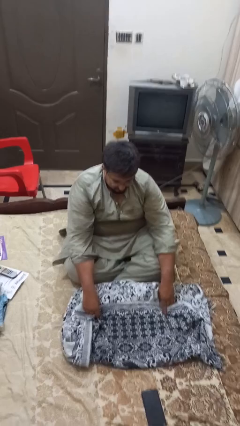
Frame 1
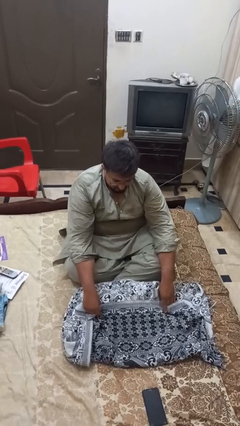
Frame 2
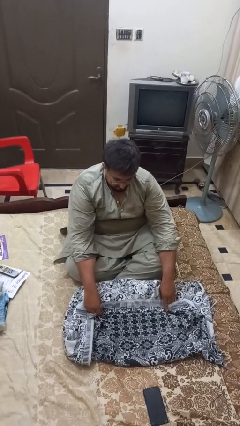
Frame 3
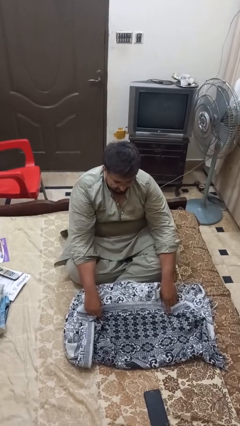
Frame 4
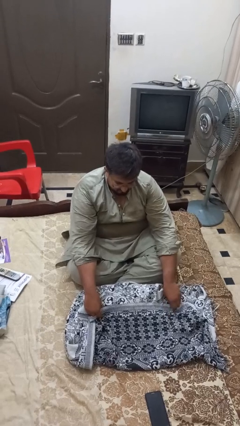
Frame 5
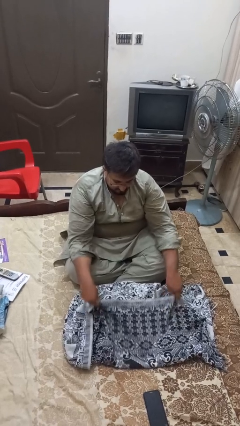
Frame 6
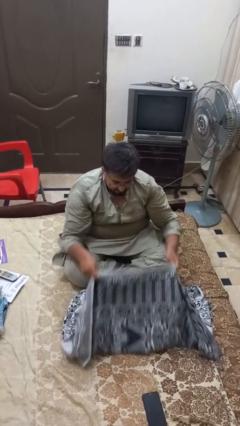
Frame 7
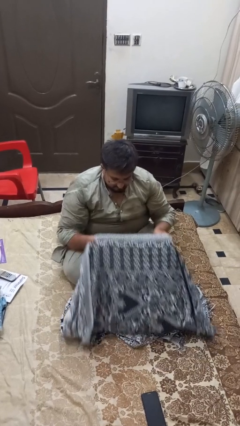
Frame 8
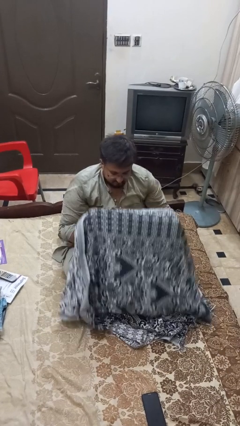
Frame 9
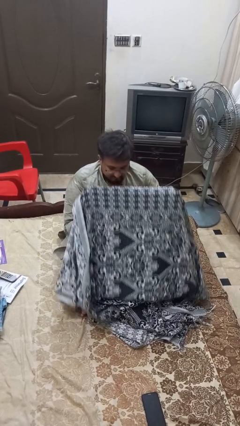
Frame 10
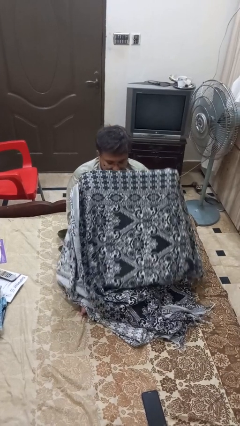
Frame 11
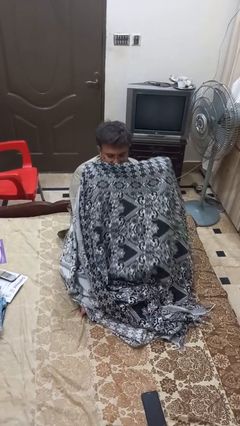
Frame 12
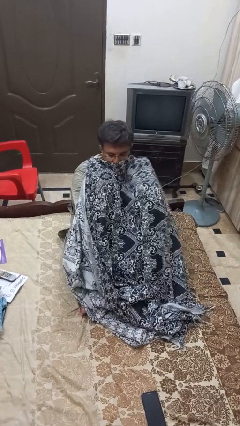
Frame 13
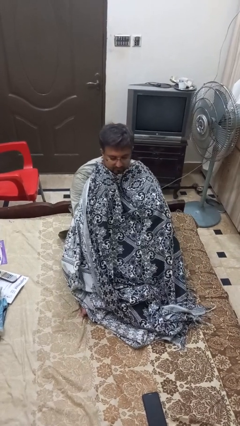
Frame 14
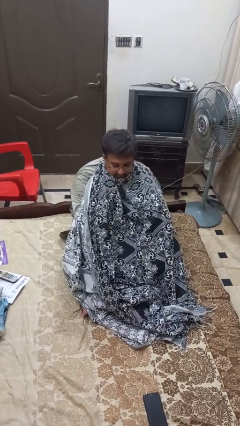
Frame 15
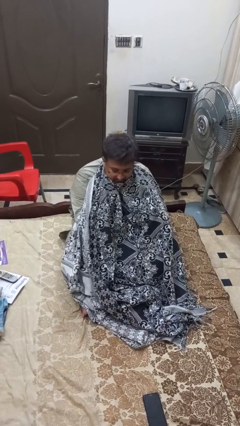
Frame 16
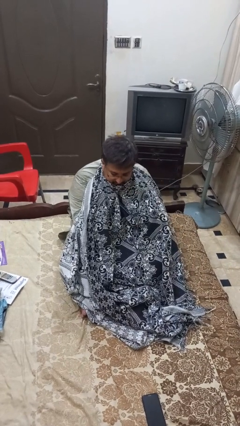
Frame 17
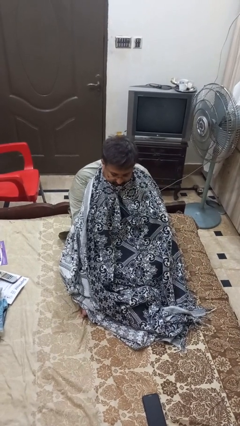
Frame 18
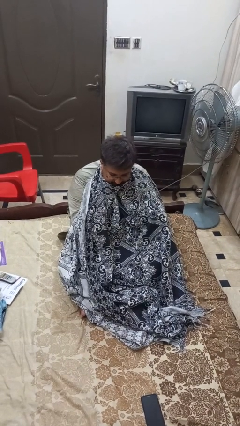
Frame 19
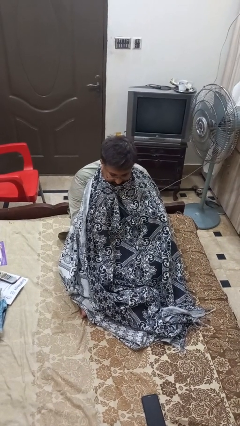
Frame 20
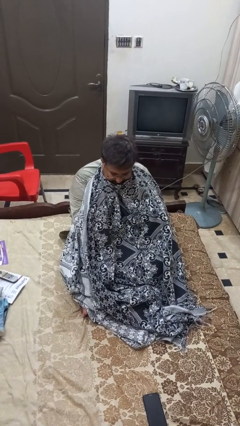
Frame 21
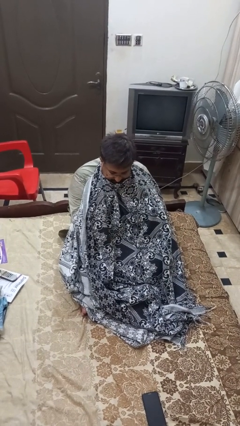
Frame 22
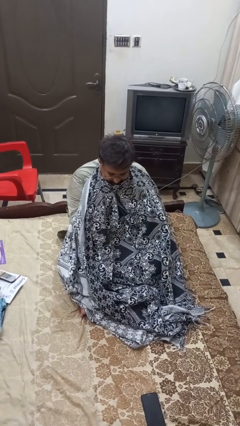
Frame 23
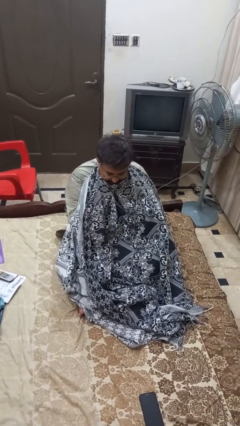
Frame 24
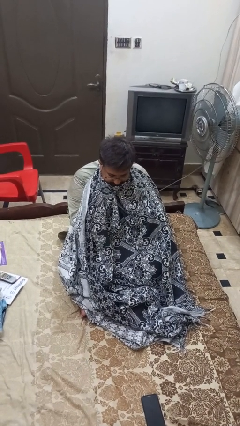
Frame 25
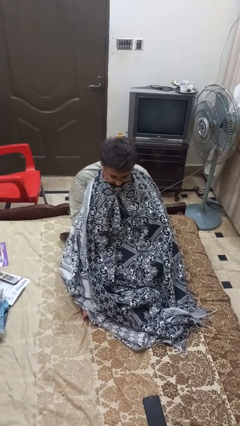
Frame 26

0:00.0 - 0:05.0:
person covers with blanket

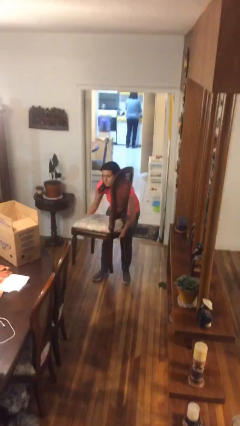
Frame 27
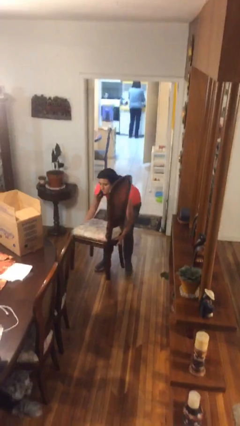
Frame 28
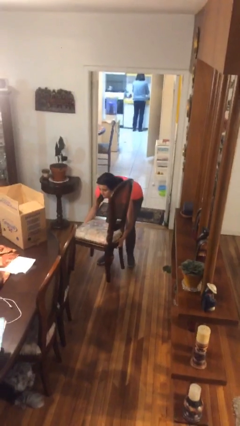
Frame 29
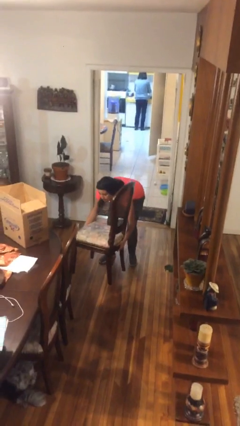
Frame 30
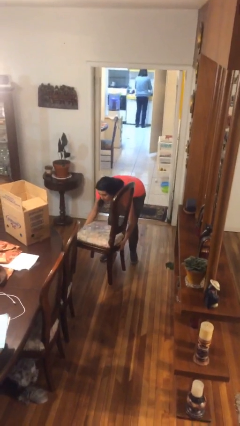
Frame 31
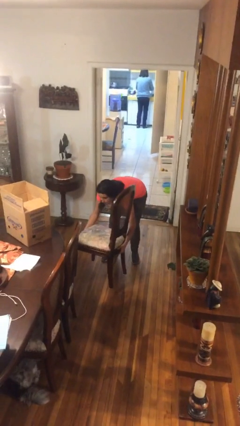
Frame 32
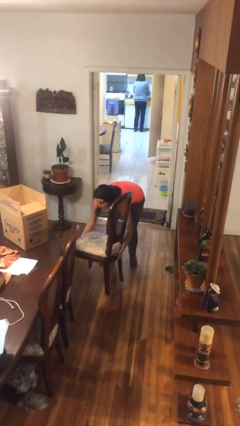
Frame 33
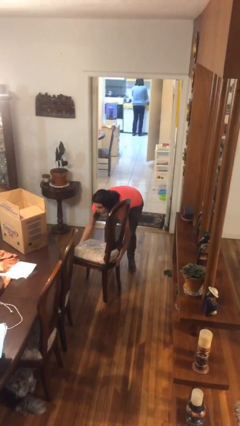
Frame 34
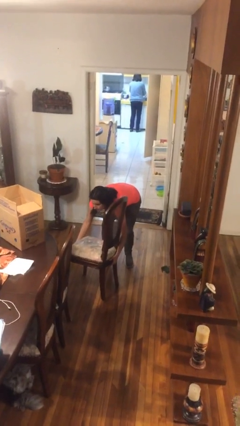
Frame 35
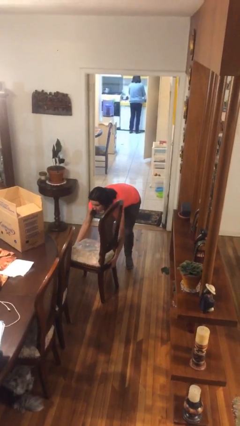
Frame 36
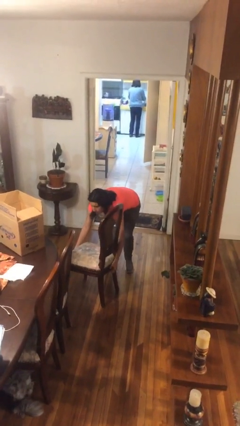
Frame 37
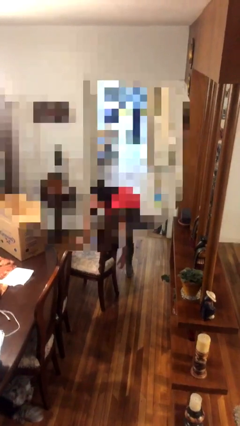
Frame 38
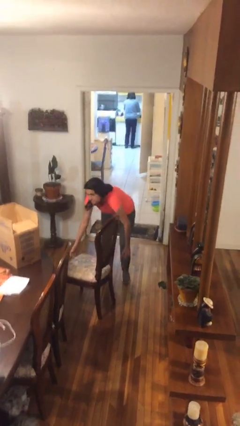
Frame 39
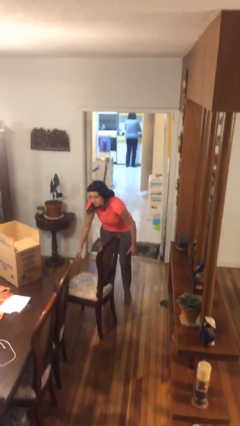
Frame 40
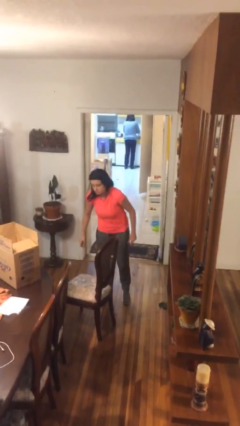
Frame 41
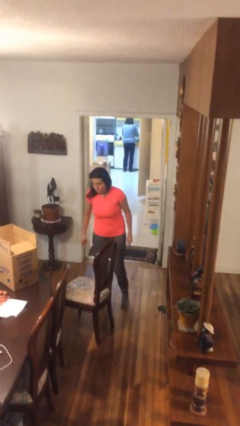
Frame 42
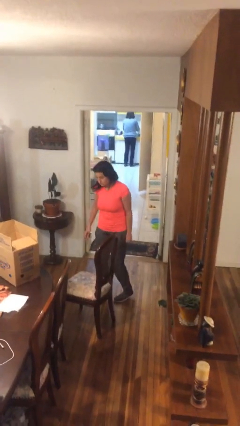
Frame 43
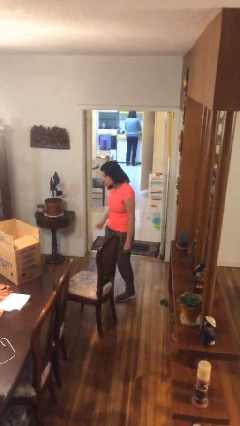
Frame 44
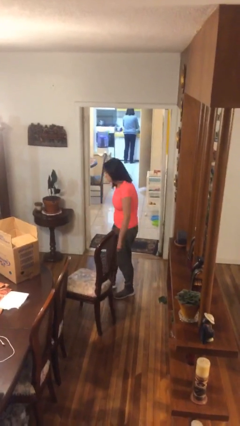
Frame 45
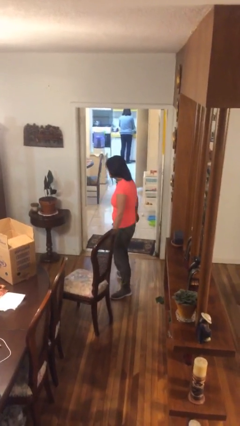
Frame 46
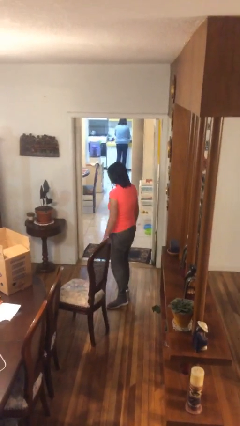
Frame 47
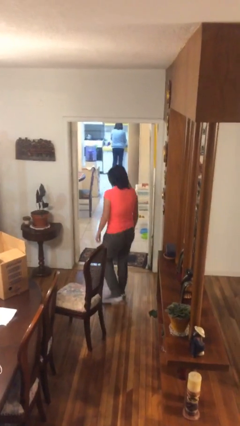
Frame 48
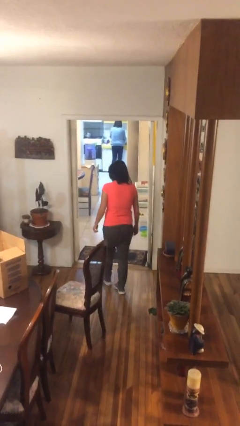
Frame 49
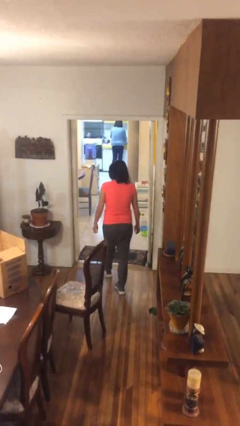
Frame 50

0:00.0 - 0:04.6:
person puts down object on floor

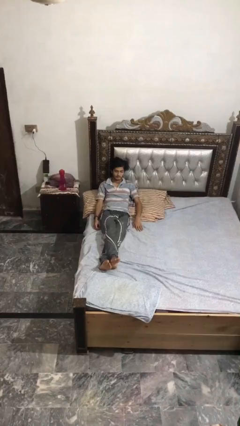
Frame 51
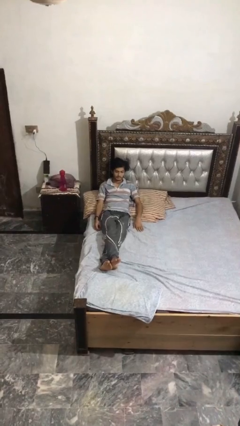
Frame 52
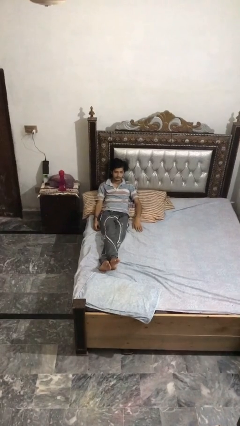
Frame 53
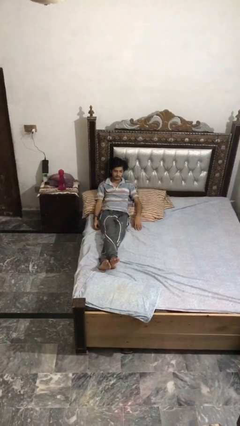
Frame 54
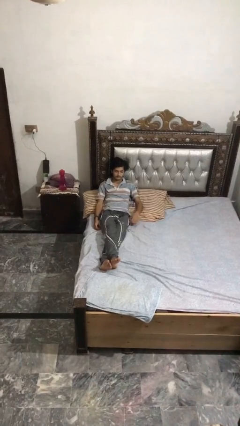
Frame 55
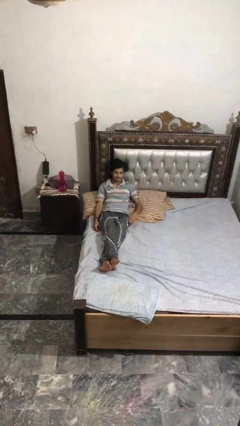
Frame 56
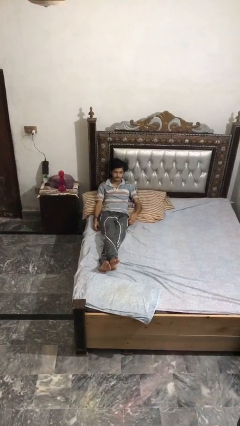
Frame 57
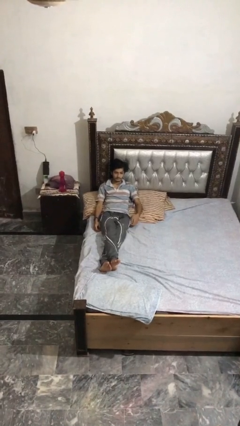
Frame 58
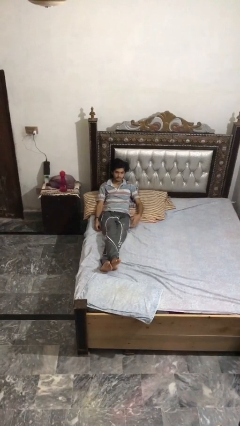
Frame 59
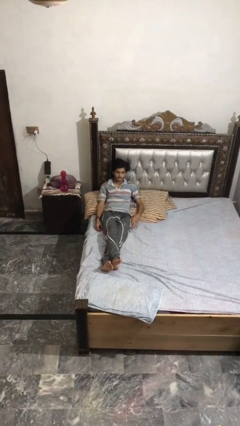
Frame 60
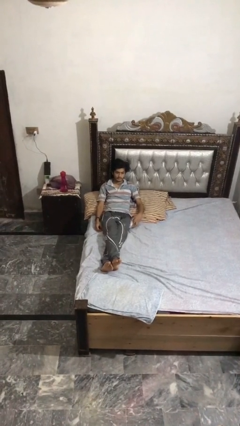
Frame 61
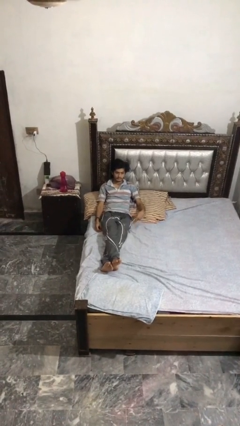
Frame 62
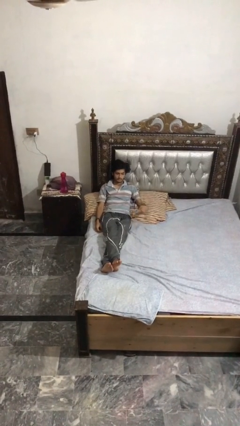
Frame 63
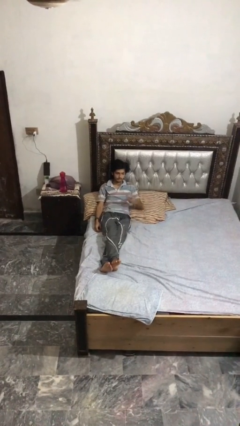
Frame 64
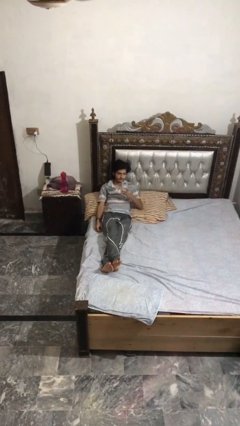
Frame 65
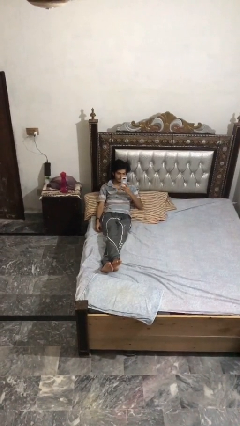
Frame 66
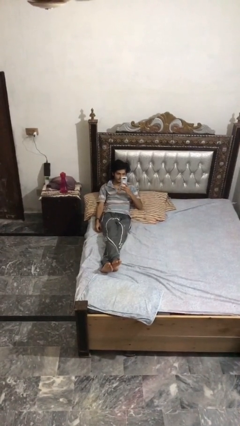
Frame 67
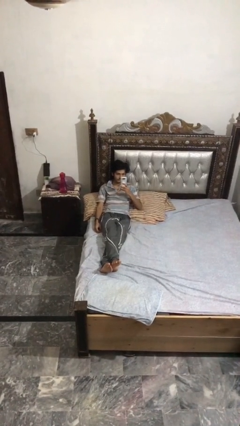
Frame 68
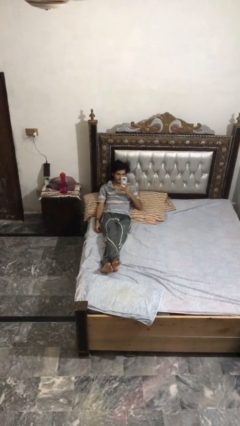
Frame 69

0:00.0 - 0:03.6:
person takes phone from pocket

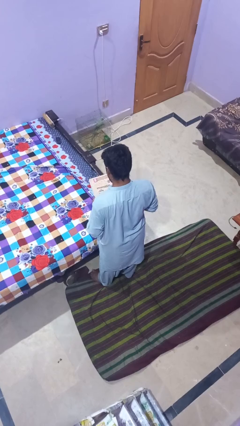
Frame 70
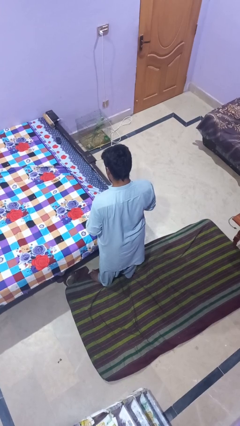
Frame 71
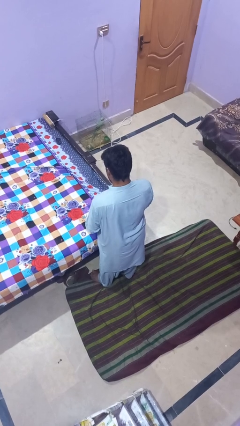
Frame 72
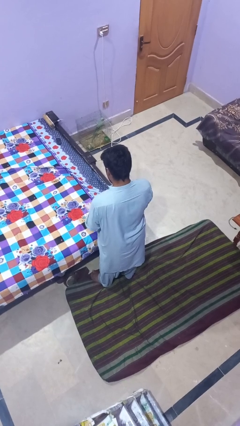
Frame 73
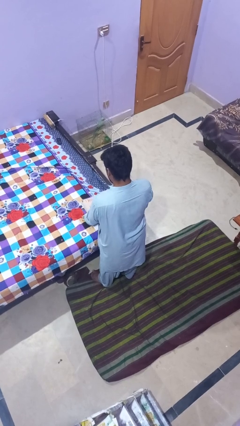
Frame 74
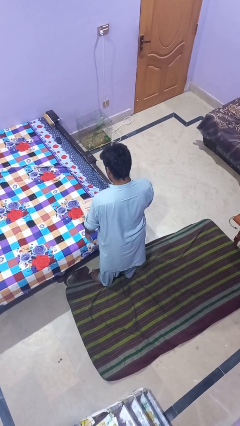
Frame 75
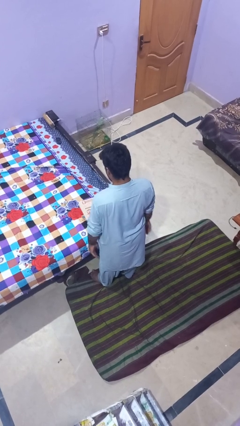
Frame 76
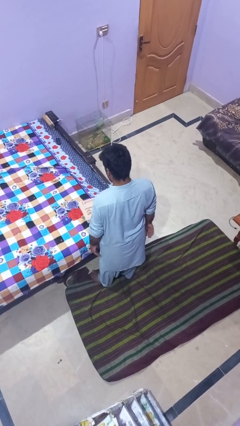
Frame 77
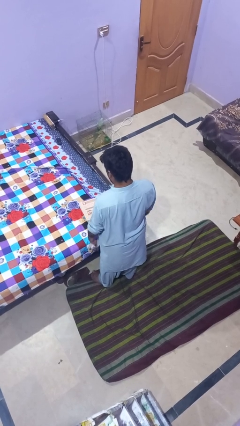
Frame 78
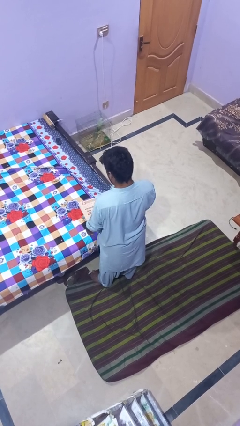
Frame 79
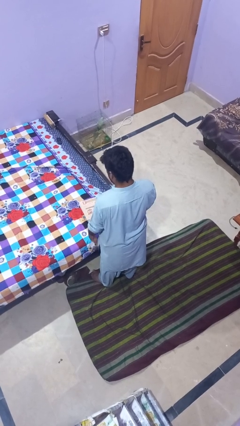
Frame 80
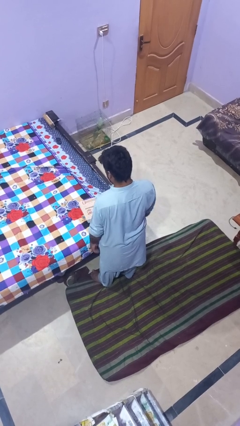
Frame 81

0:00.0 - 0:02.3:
person puts down object on bed

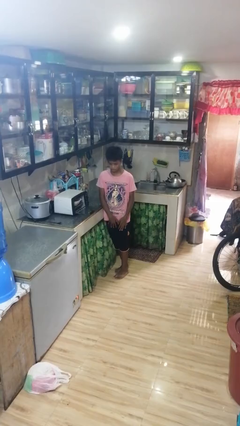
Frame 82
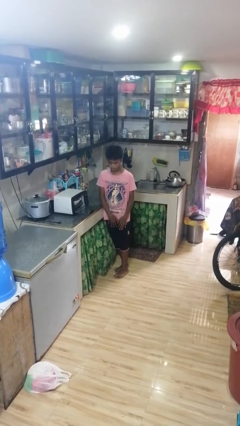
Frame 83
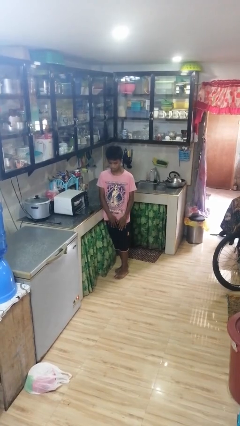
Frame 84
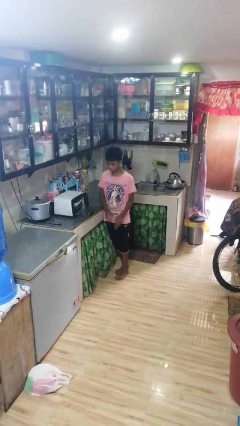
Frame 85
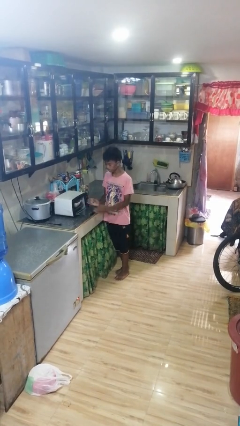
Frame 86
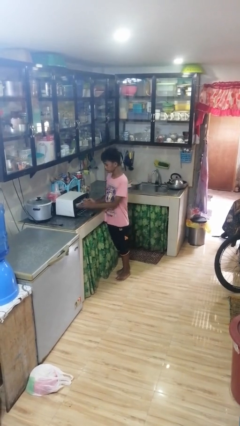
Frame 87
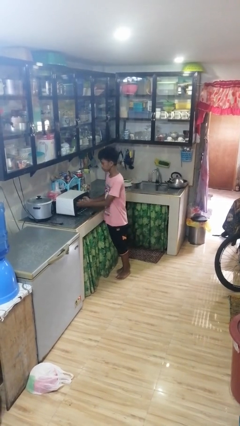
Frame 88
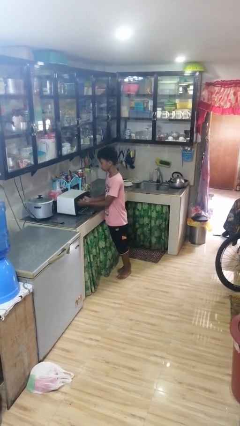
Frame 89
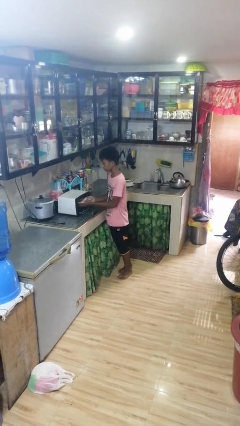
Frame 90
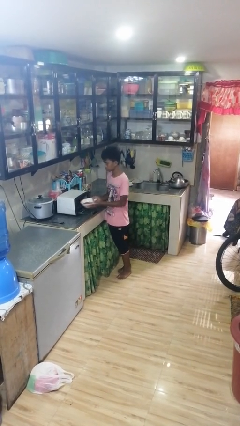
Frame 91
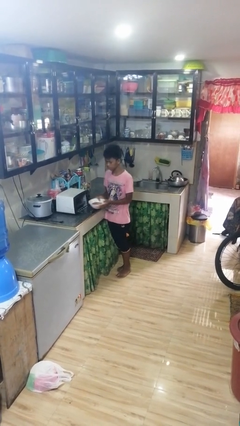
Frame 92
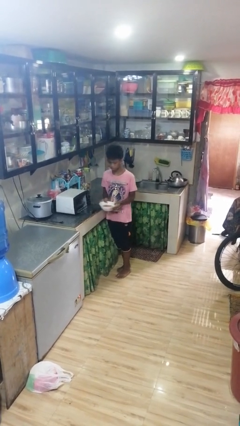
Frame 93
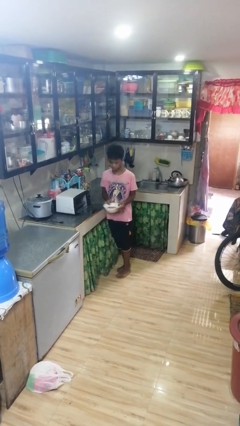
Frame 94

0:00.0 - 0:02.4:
person takes object from microwave
